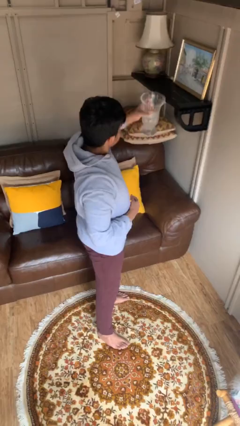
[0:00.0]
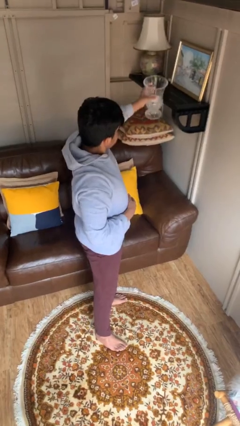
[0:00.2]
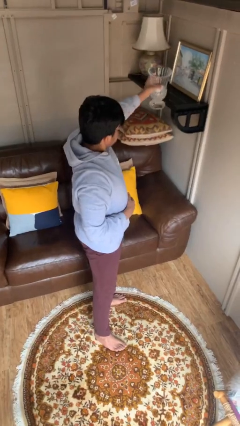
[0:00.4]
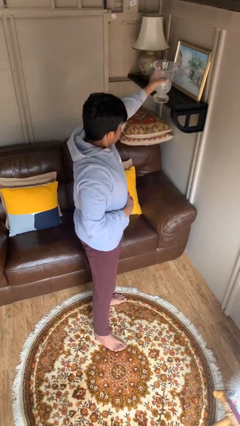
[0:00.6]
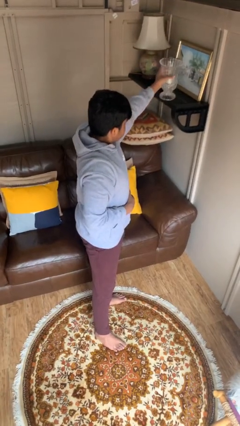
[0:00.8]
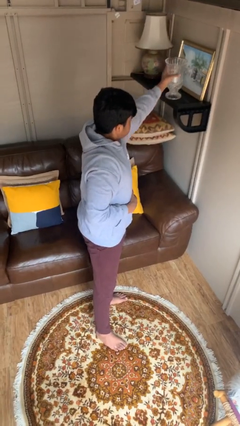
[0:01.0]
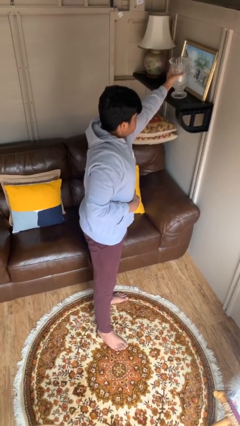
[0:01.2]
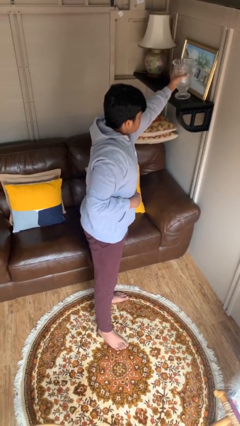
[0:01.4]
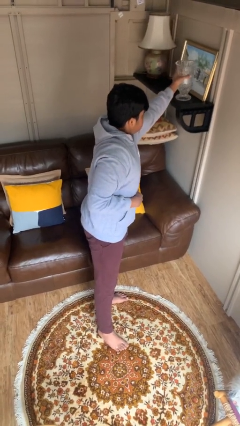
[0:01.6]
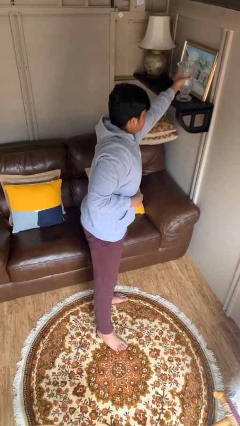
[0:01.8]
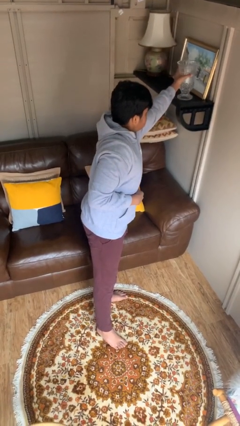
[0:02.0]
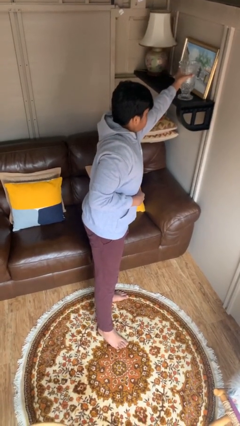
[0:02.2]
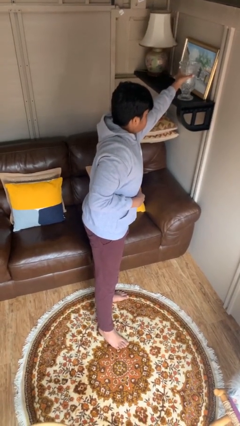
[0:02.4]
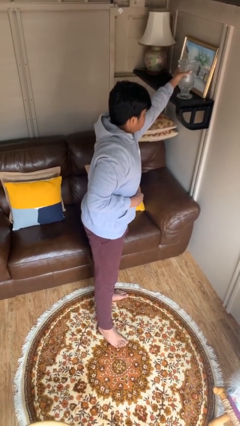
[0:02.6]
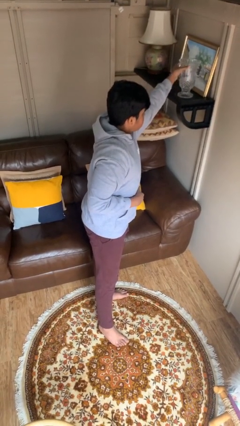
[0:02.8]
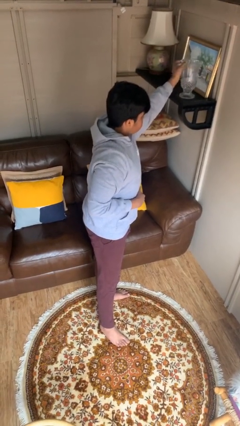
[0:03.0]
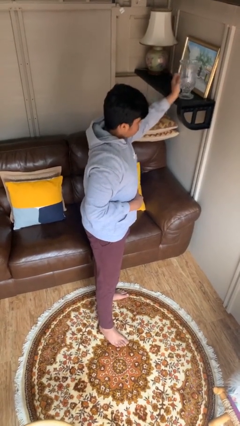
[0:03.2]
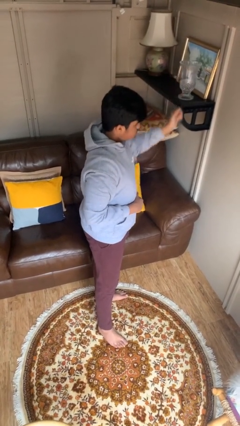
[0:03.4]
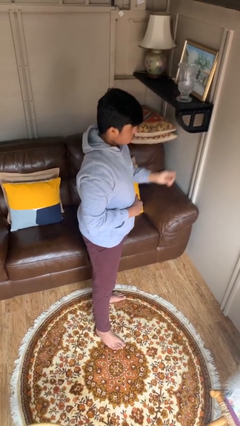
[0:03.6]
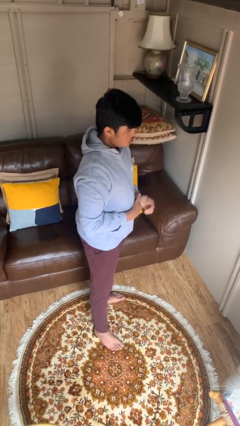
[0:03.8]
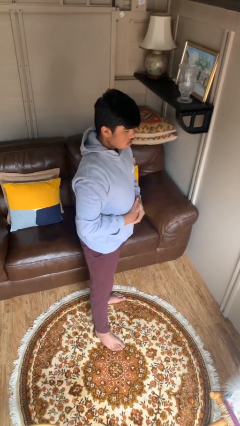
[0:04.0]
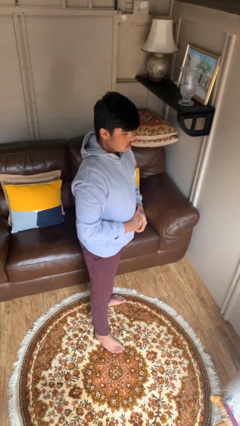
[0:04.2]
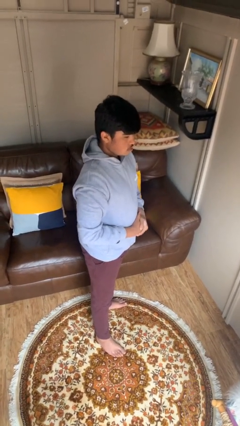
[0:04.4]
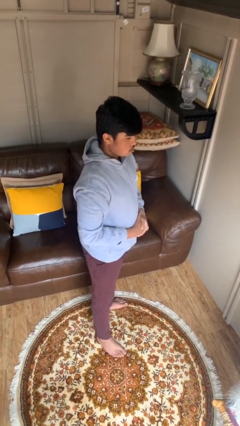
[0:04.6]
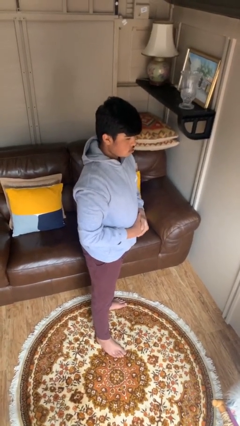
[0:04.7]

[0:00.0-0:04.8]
person puts down object on shelf

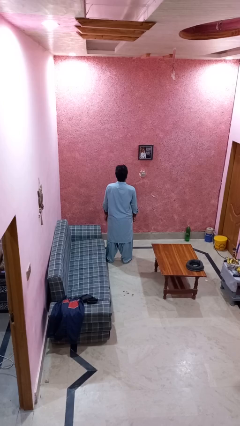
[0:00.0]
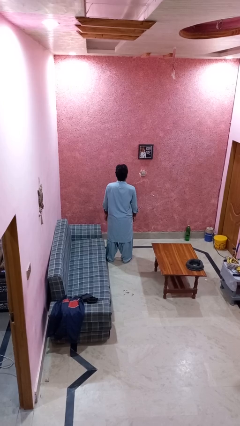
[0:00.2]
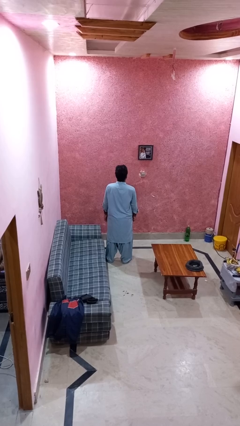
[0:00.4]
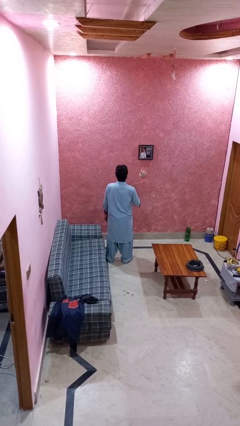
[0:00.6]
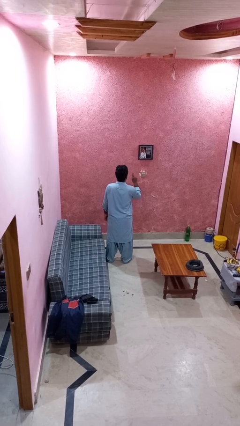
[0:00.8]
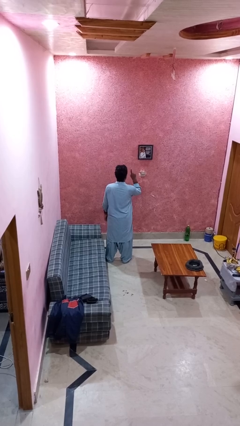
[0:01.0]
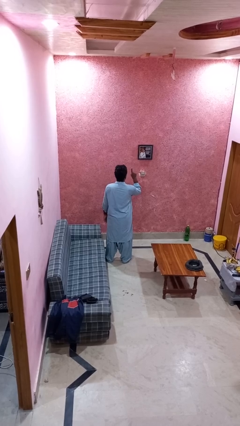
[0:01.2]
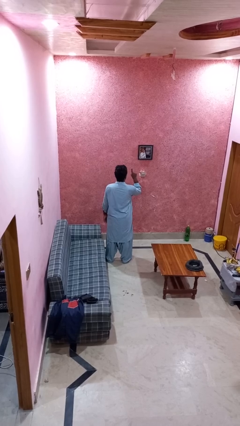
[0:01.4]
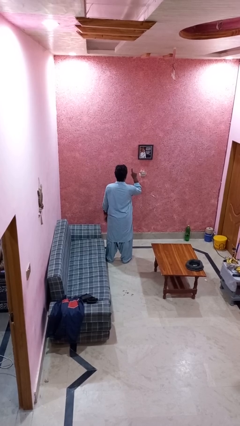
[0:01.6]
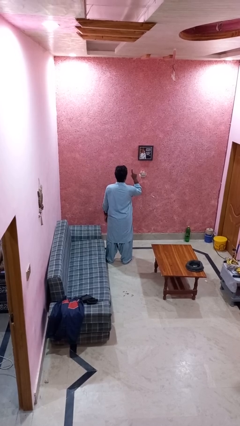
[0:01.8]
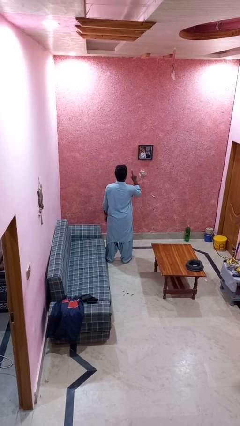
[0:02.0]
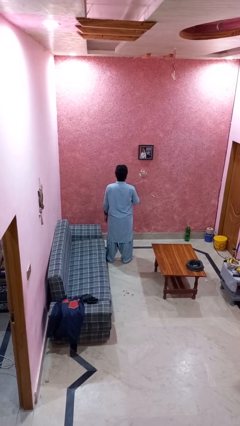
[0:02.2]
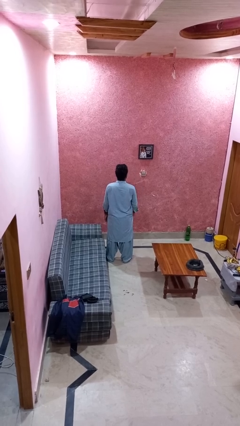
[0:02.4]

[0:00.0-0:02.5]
person gestures number one

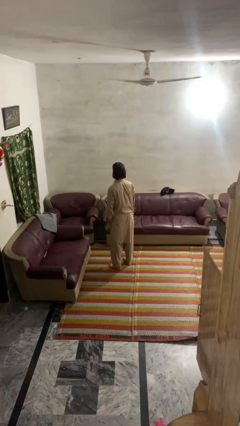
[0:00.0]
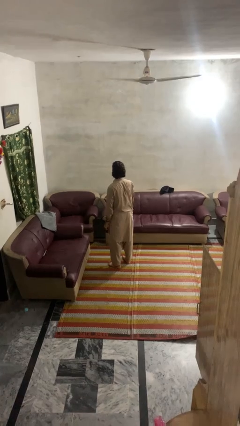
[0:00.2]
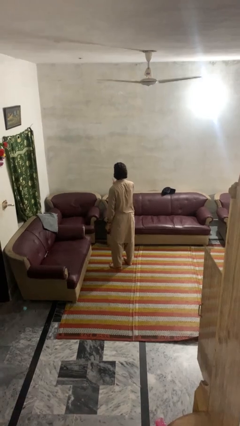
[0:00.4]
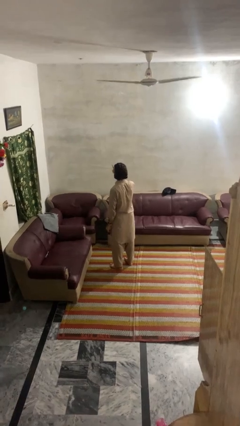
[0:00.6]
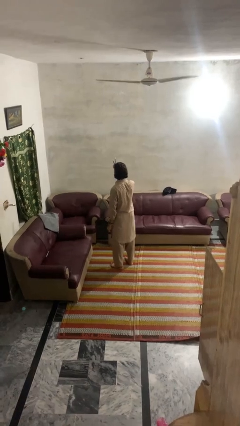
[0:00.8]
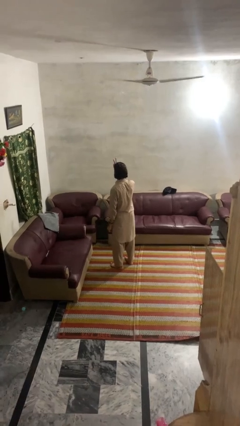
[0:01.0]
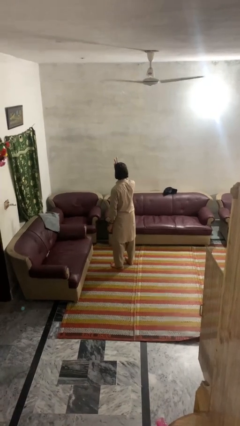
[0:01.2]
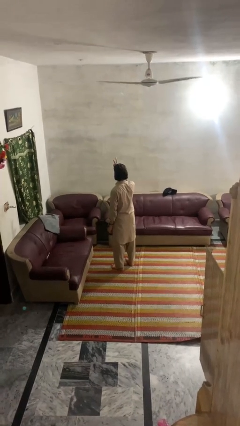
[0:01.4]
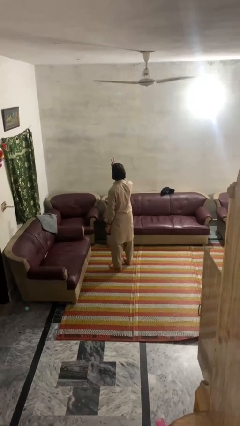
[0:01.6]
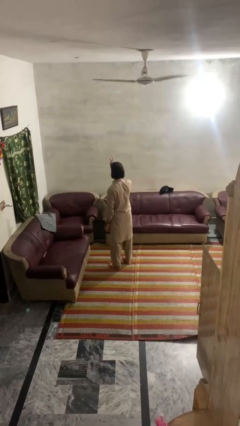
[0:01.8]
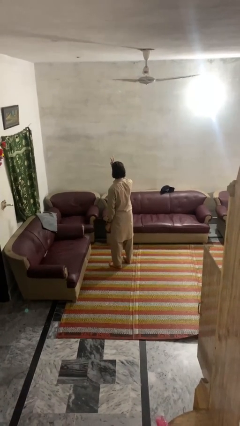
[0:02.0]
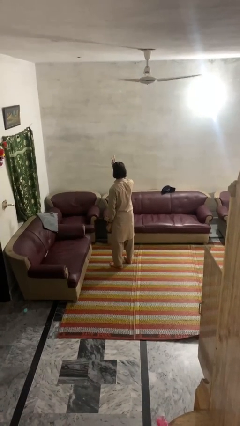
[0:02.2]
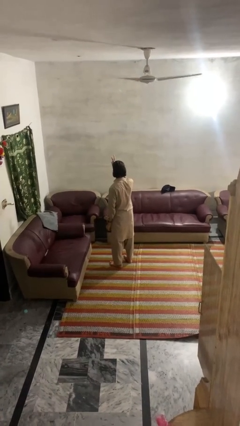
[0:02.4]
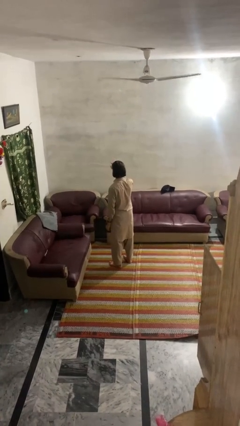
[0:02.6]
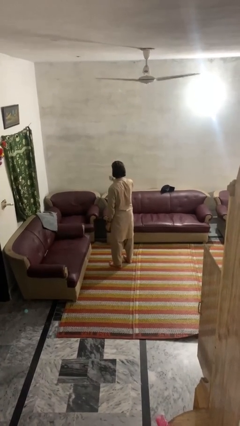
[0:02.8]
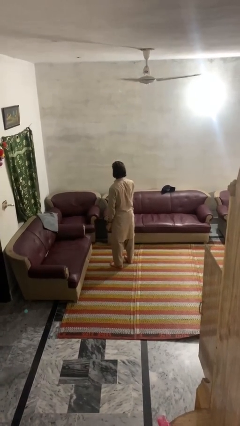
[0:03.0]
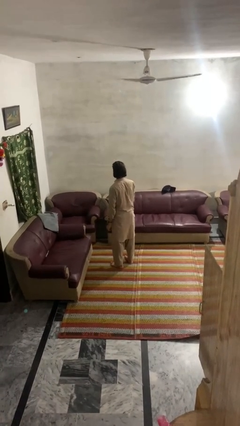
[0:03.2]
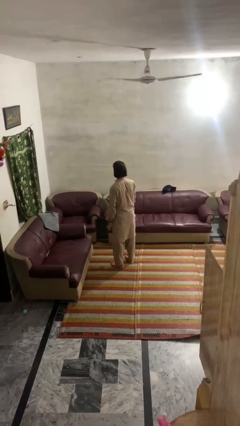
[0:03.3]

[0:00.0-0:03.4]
person gestures peace

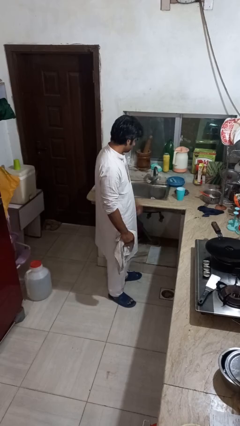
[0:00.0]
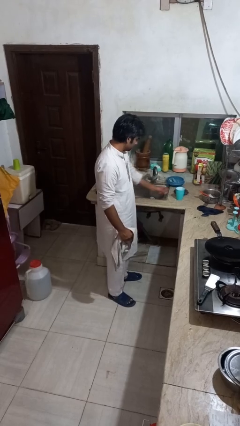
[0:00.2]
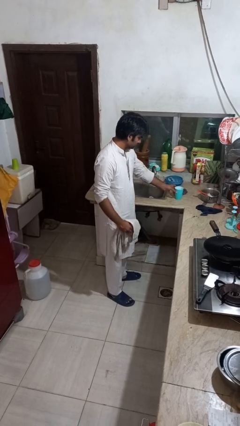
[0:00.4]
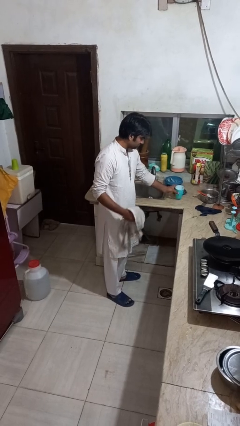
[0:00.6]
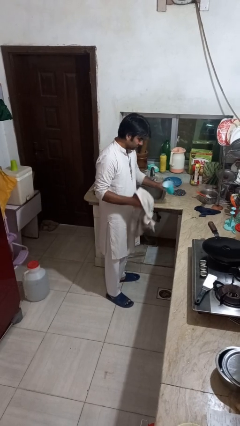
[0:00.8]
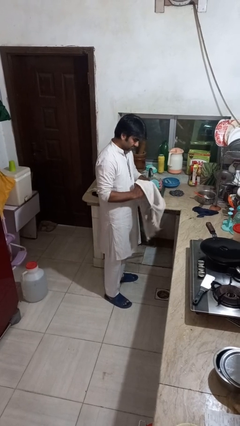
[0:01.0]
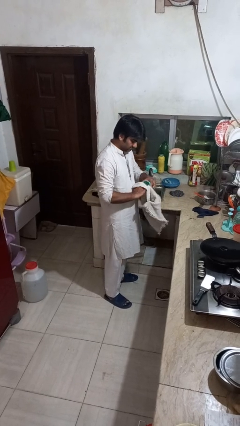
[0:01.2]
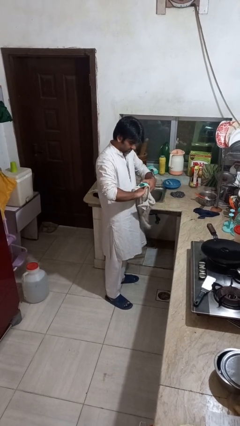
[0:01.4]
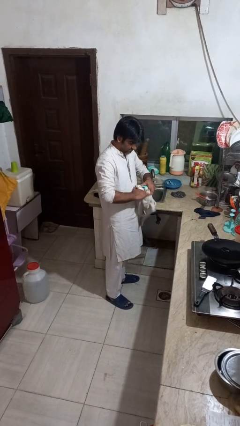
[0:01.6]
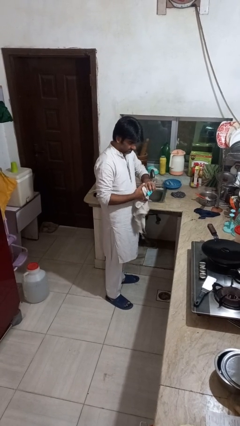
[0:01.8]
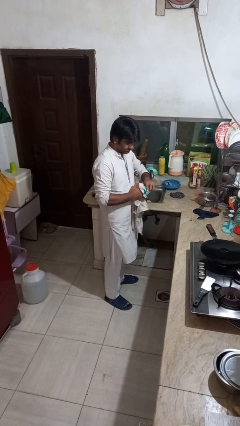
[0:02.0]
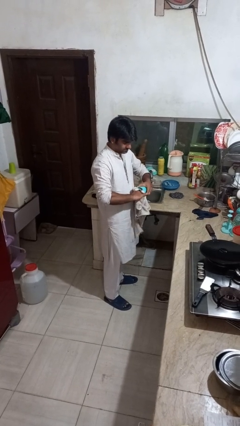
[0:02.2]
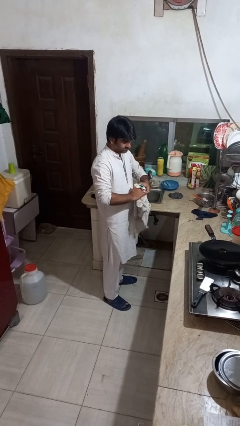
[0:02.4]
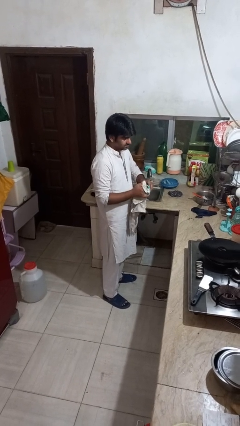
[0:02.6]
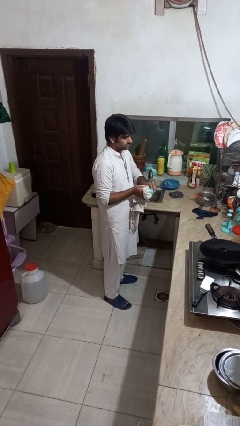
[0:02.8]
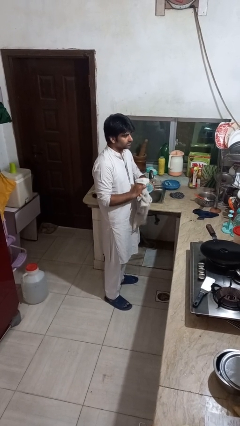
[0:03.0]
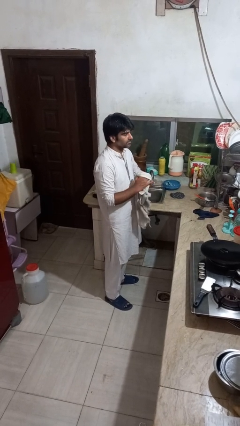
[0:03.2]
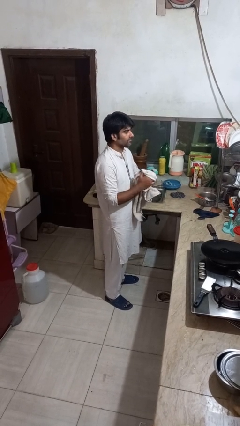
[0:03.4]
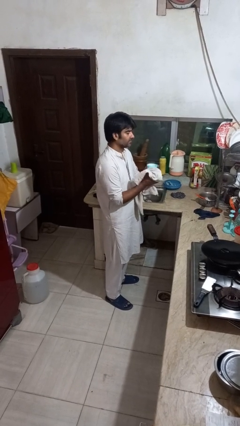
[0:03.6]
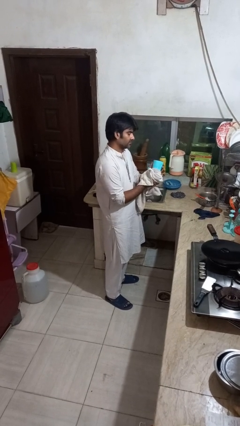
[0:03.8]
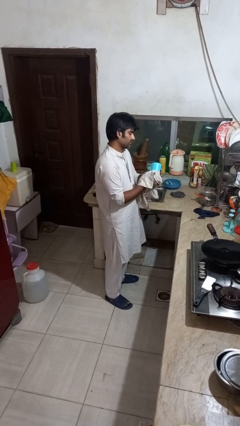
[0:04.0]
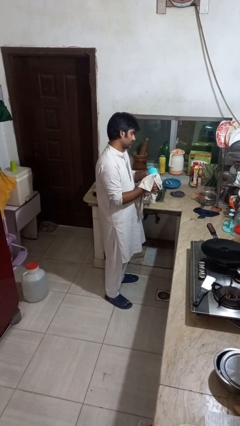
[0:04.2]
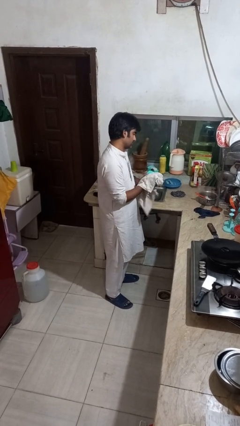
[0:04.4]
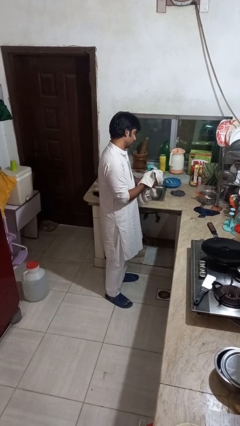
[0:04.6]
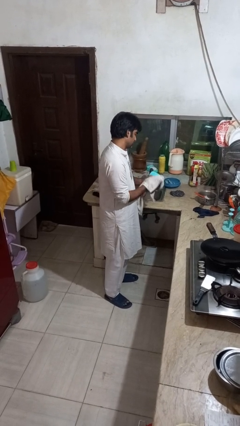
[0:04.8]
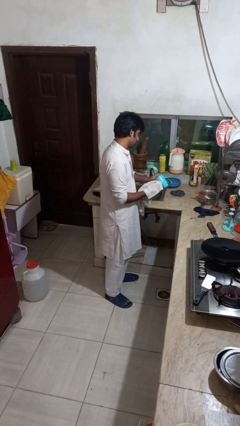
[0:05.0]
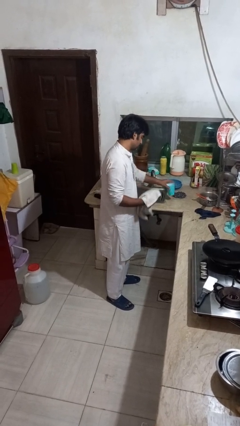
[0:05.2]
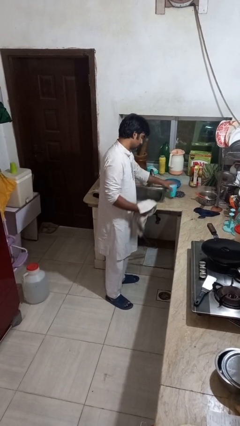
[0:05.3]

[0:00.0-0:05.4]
person dries dish

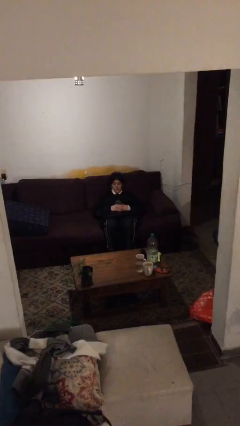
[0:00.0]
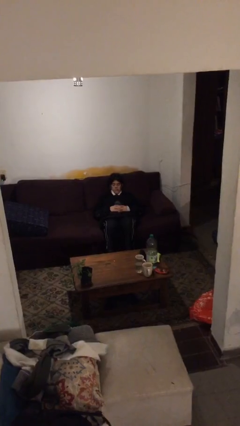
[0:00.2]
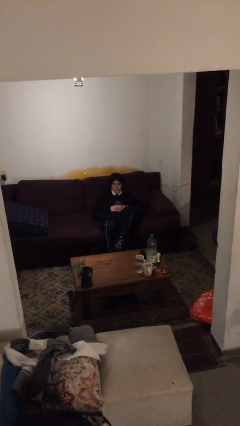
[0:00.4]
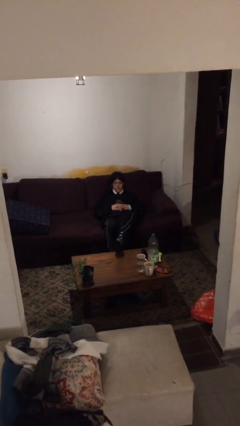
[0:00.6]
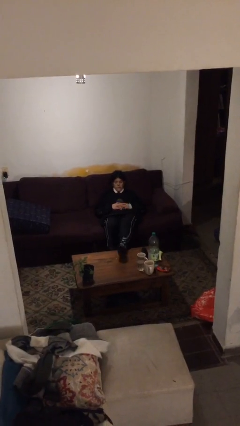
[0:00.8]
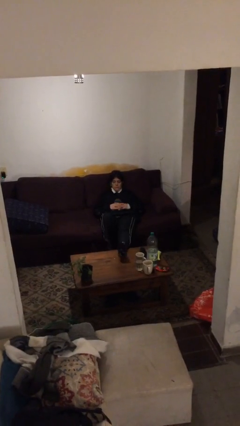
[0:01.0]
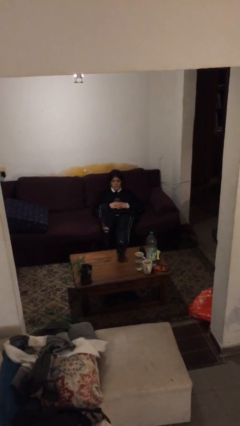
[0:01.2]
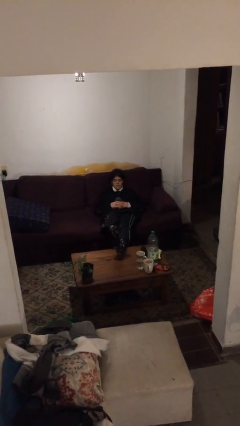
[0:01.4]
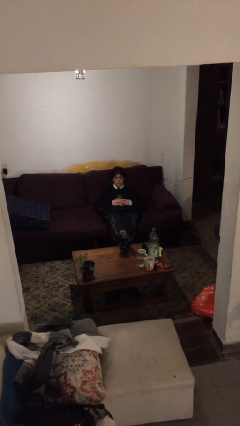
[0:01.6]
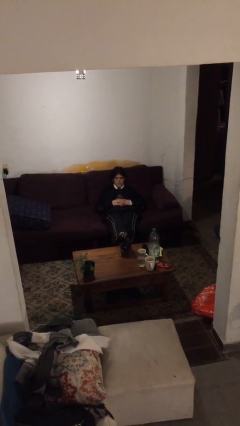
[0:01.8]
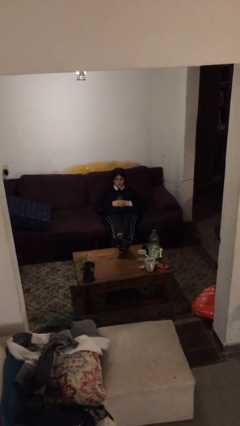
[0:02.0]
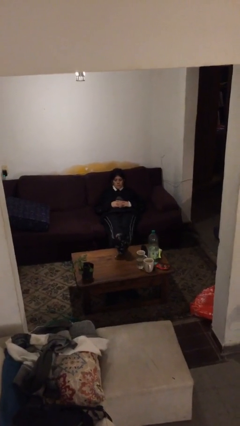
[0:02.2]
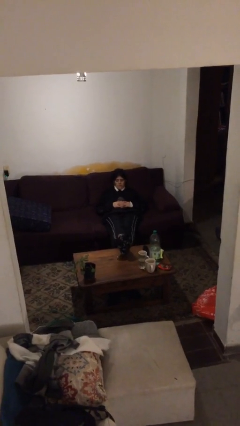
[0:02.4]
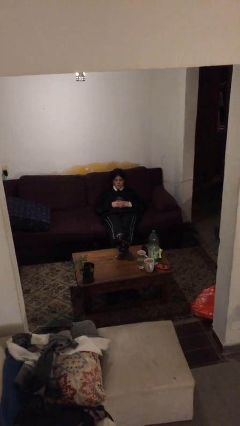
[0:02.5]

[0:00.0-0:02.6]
person puts feet up
